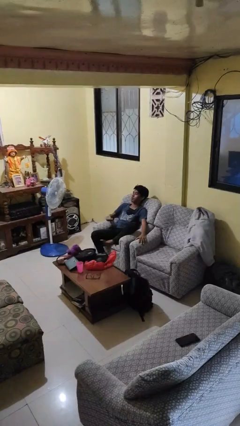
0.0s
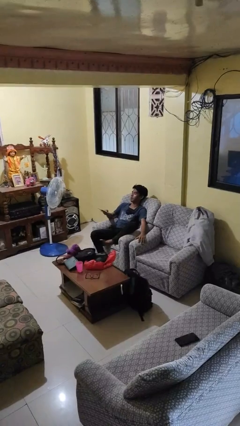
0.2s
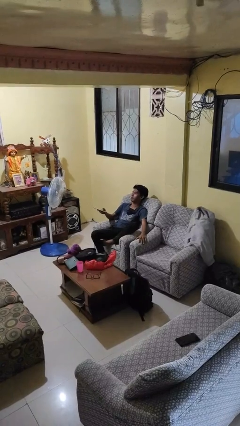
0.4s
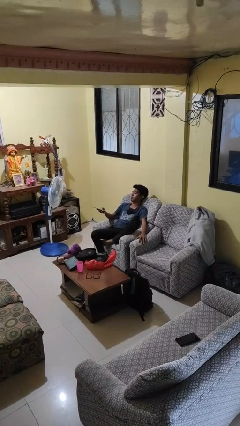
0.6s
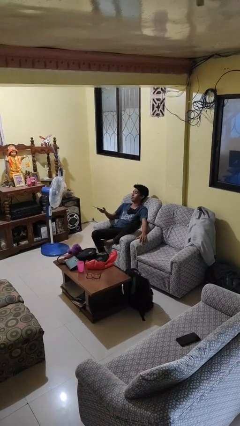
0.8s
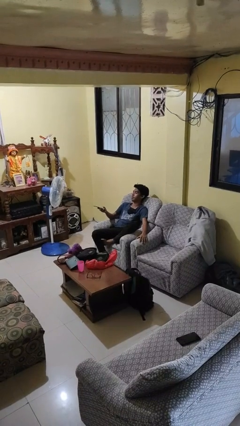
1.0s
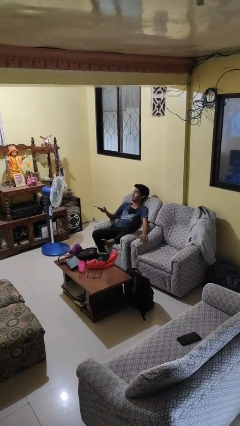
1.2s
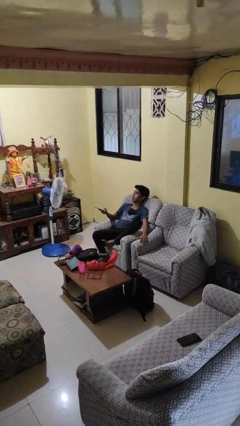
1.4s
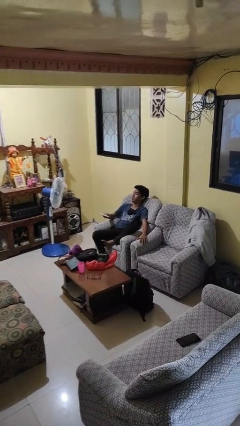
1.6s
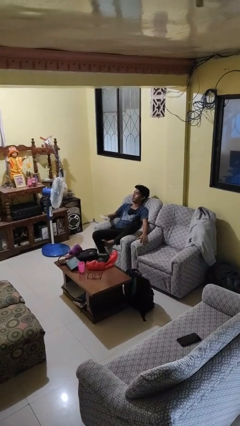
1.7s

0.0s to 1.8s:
person uses television remote

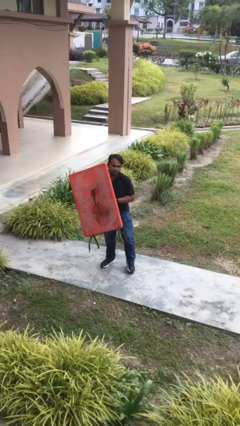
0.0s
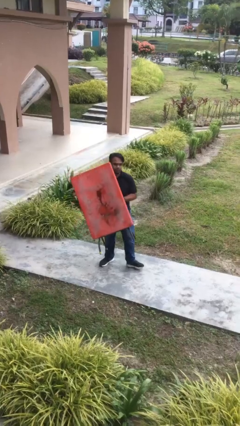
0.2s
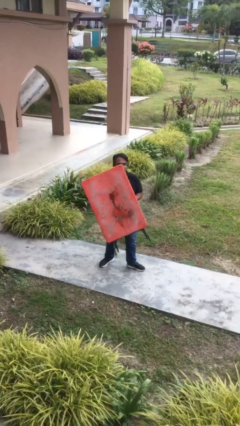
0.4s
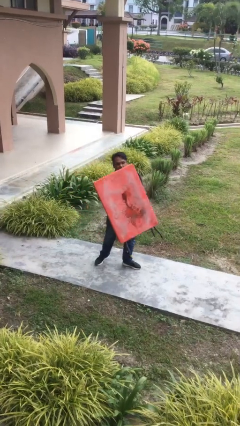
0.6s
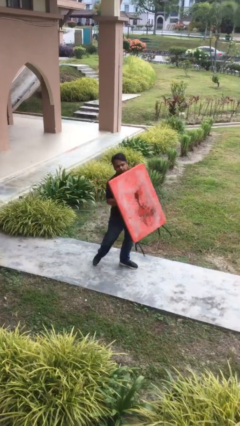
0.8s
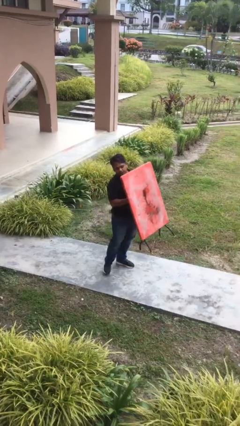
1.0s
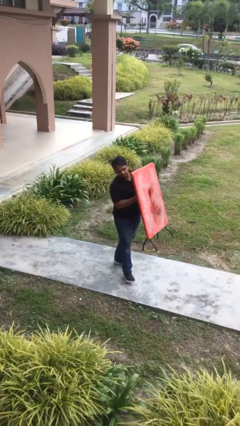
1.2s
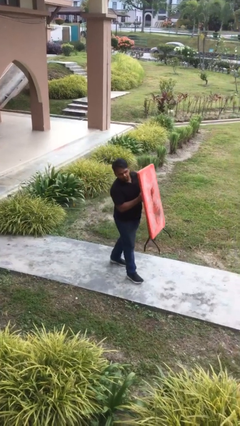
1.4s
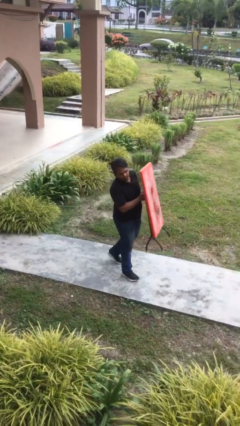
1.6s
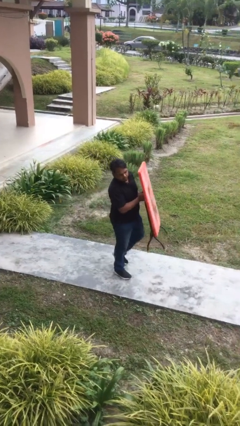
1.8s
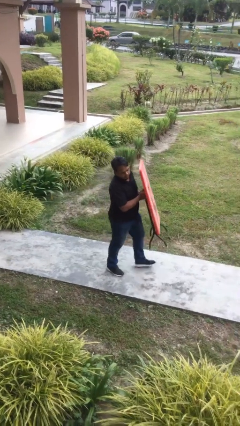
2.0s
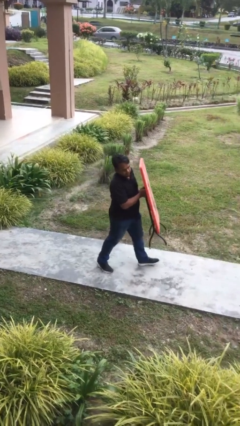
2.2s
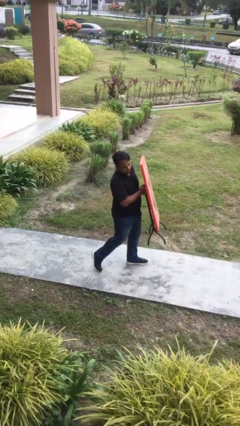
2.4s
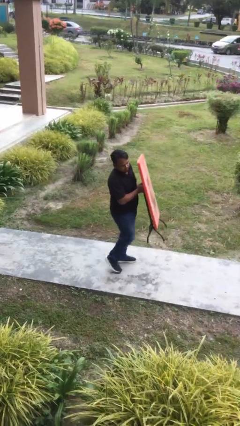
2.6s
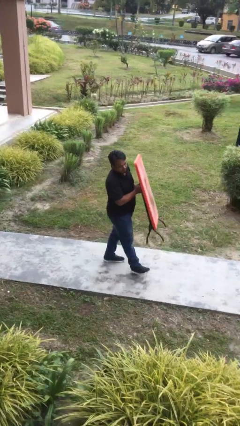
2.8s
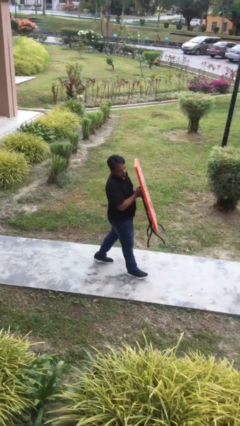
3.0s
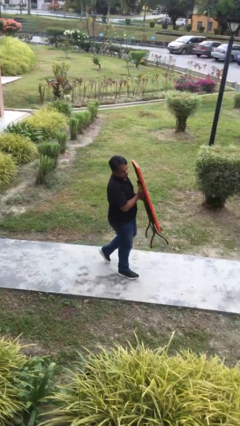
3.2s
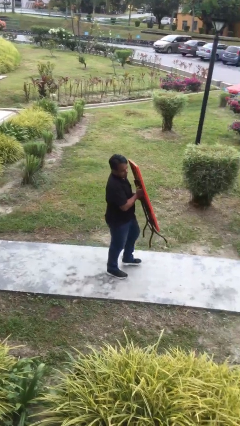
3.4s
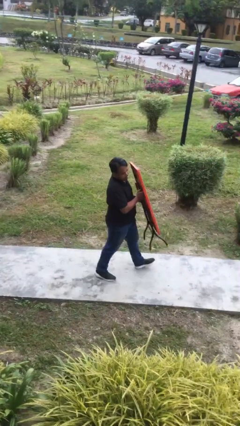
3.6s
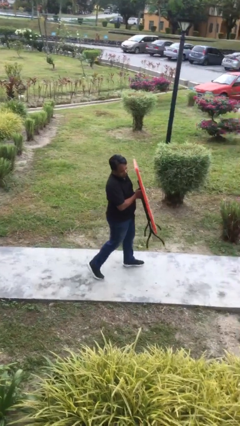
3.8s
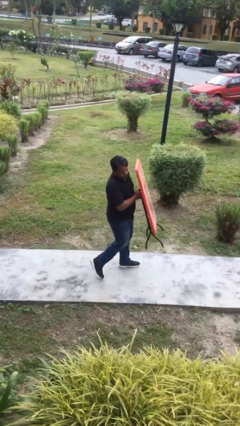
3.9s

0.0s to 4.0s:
person carries heavy object

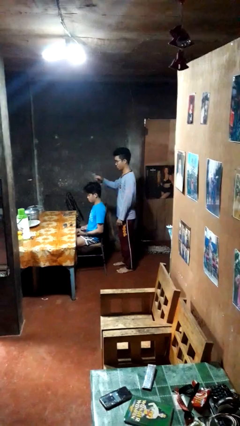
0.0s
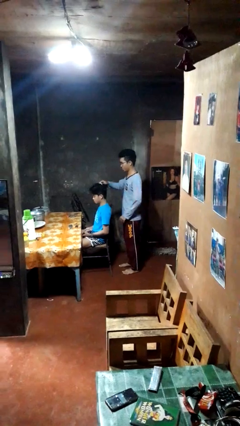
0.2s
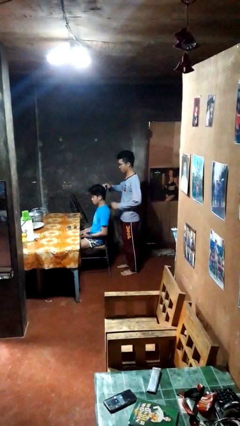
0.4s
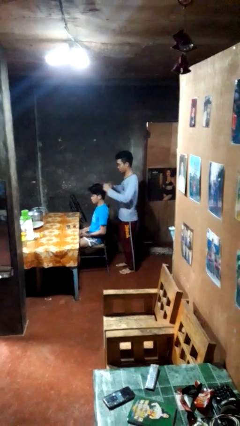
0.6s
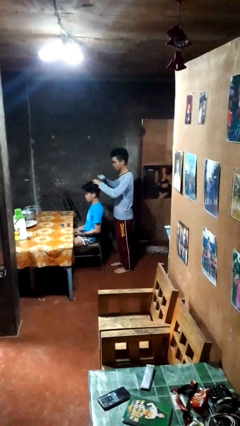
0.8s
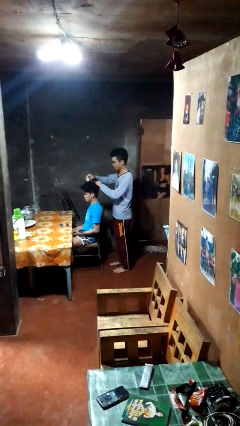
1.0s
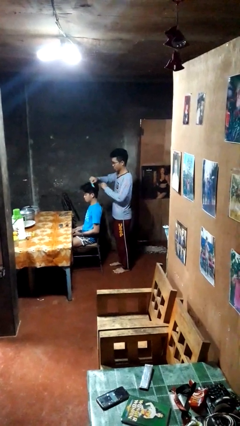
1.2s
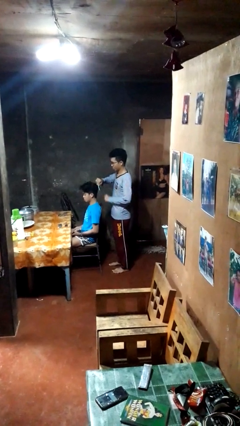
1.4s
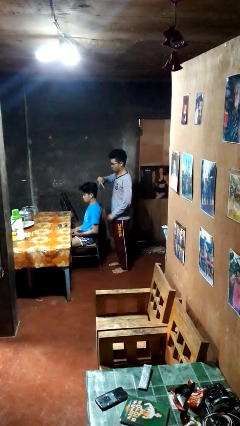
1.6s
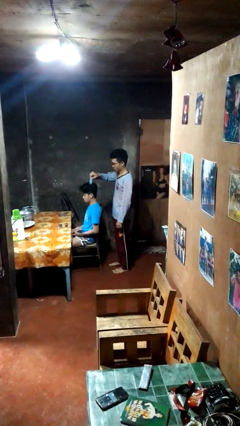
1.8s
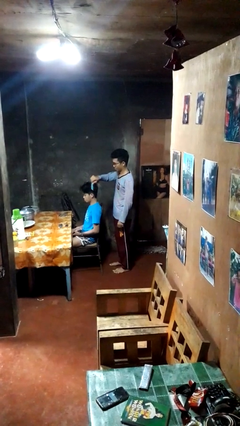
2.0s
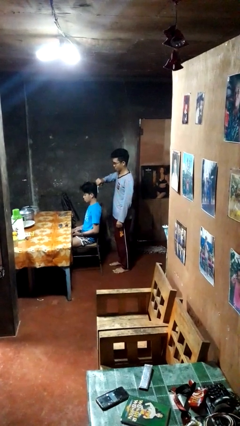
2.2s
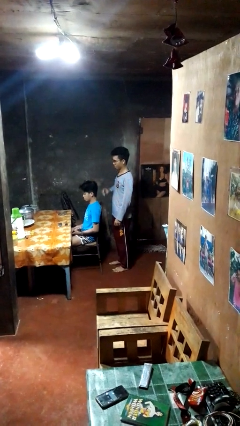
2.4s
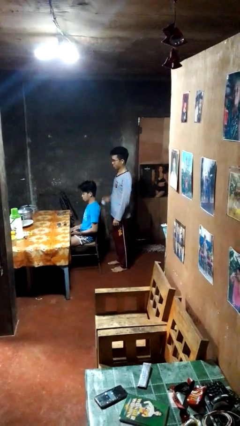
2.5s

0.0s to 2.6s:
person brushes hair of person

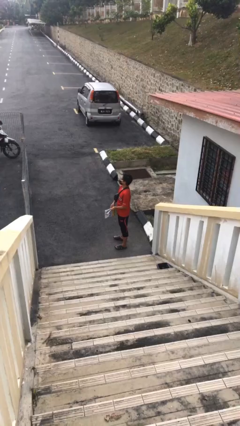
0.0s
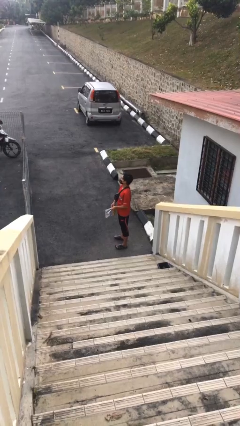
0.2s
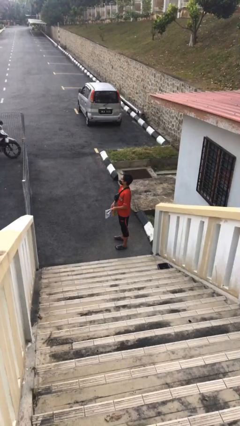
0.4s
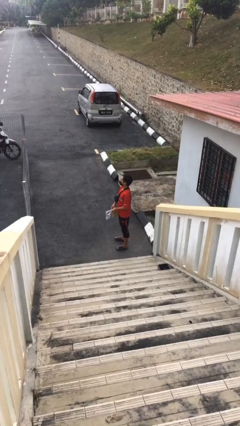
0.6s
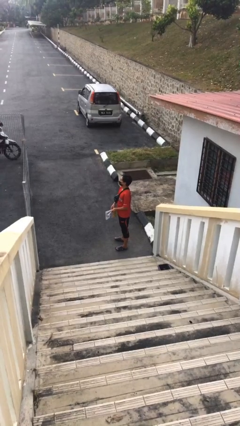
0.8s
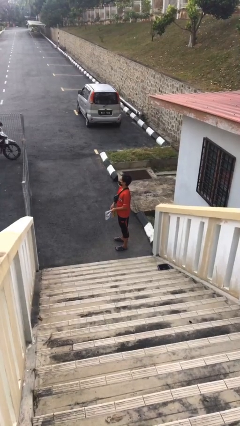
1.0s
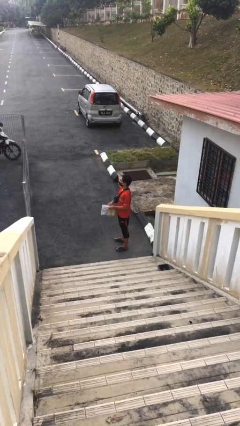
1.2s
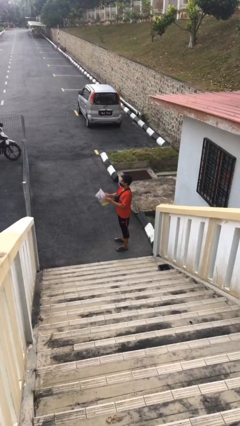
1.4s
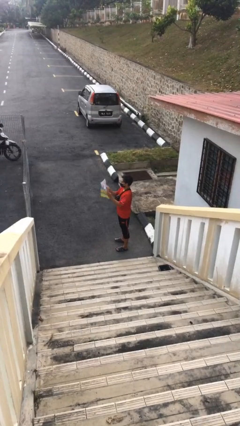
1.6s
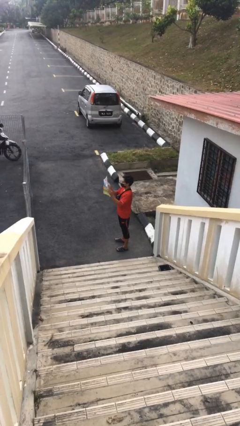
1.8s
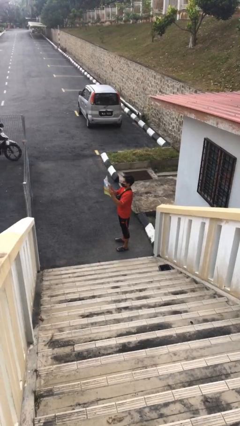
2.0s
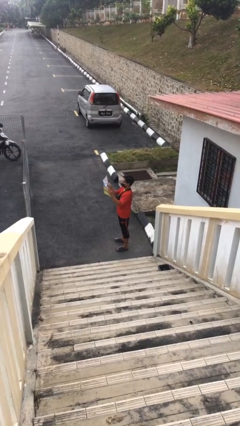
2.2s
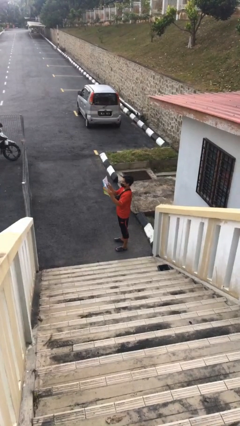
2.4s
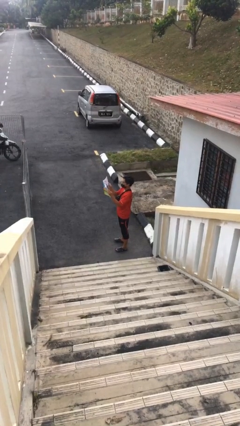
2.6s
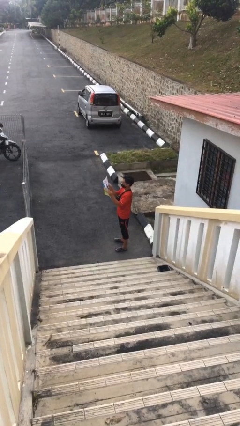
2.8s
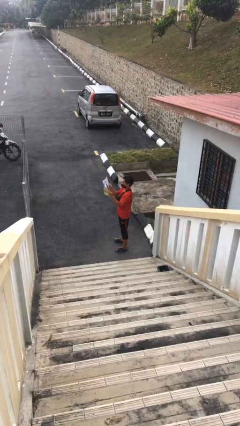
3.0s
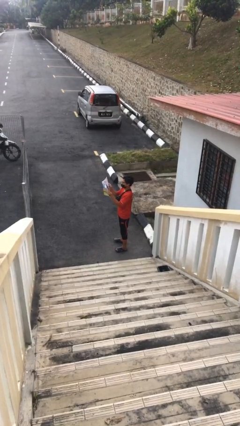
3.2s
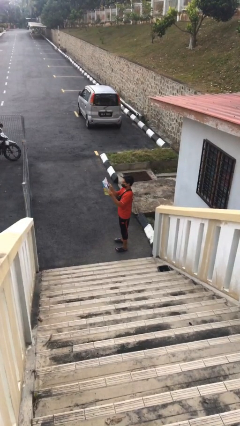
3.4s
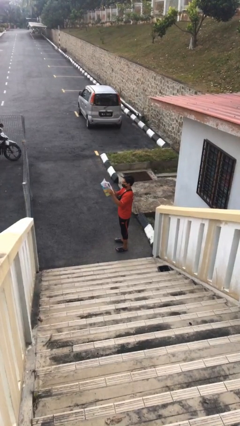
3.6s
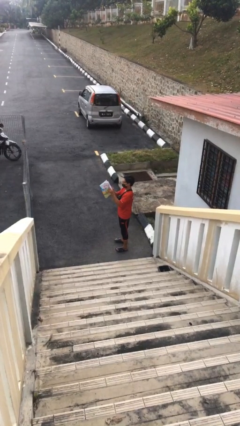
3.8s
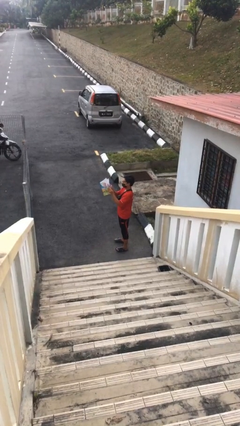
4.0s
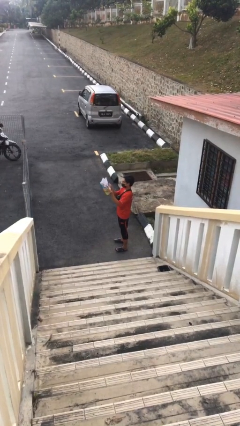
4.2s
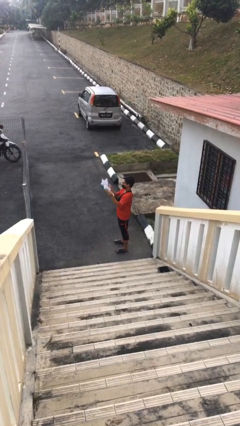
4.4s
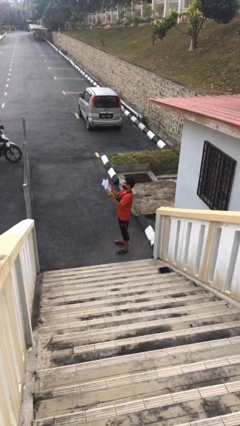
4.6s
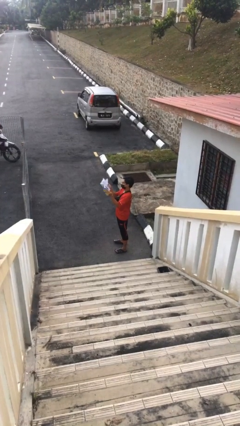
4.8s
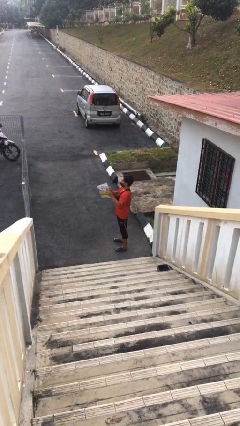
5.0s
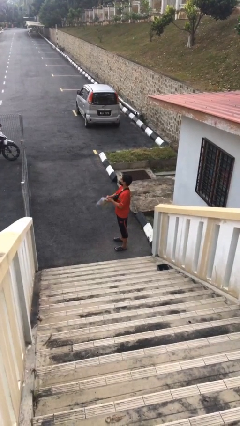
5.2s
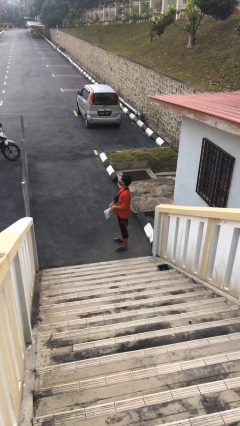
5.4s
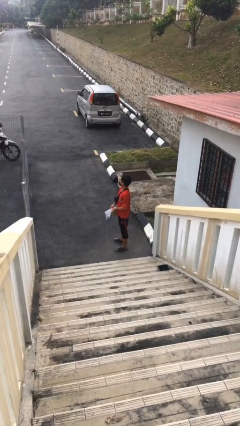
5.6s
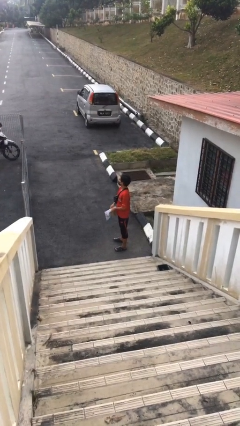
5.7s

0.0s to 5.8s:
person reads document

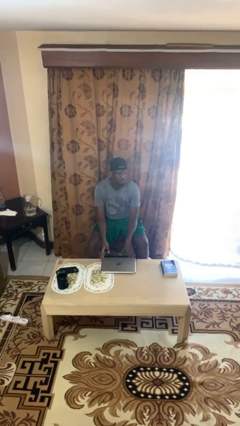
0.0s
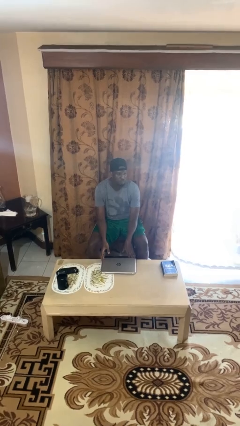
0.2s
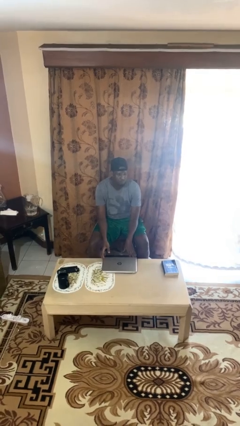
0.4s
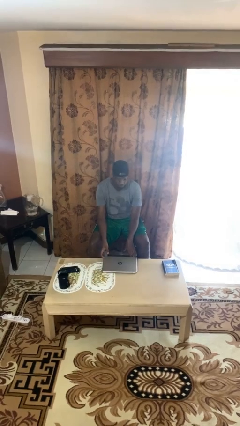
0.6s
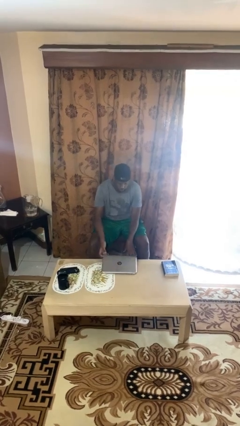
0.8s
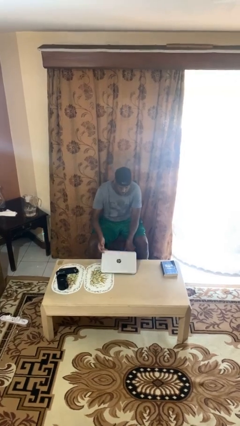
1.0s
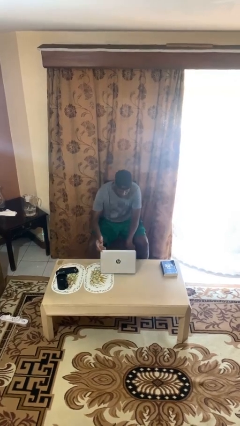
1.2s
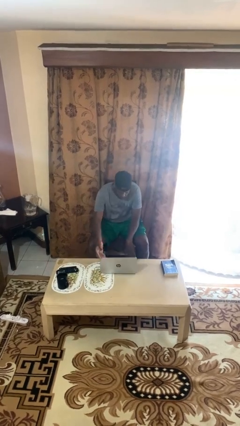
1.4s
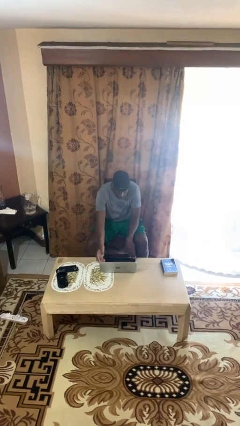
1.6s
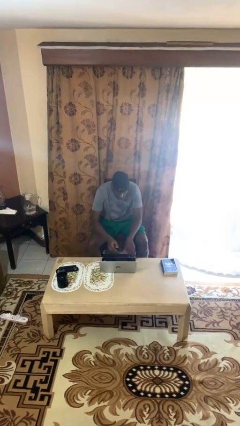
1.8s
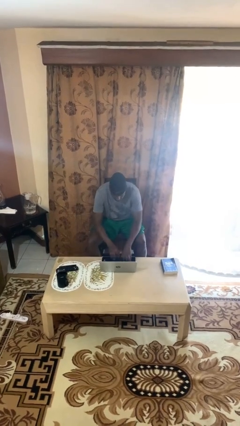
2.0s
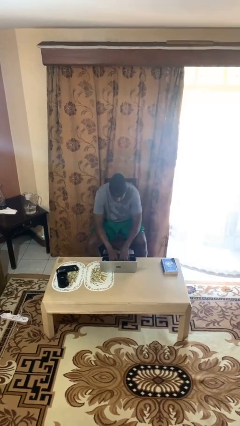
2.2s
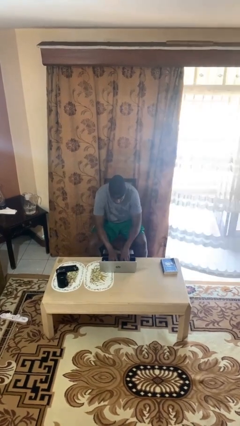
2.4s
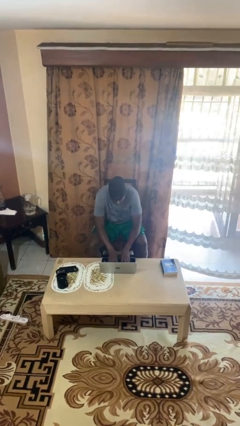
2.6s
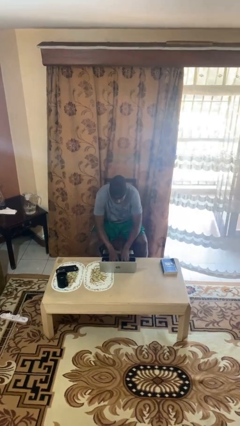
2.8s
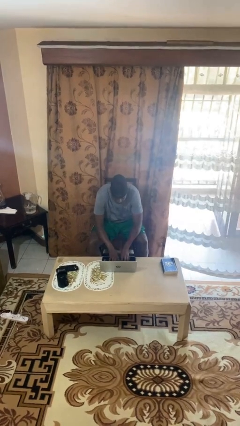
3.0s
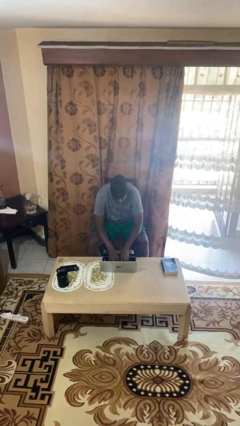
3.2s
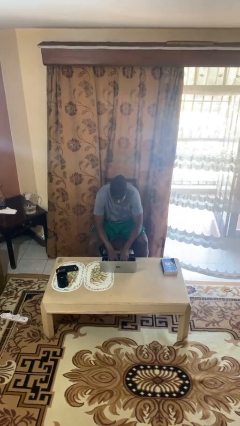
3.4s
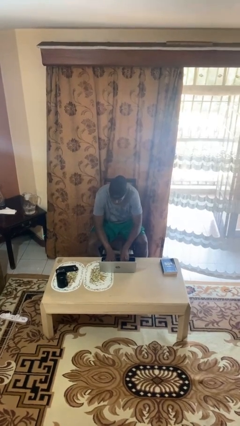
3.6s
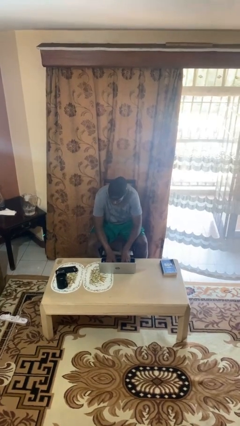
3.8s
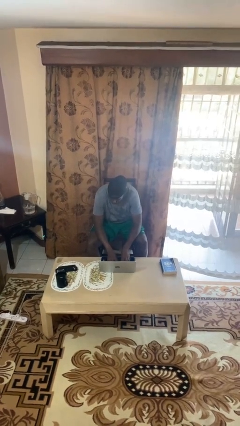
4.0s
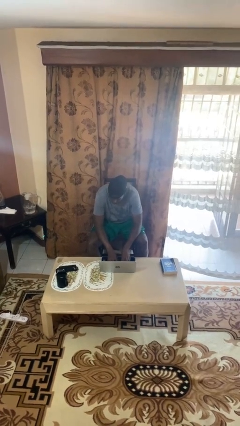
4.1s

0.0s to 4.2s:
person interacts with laptop
